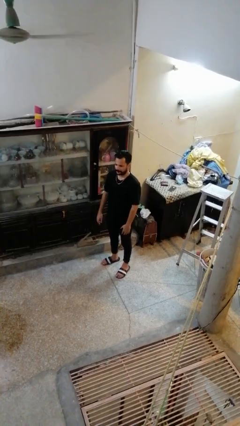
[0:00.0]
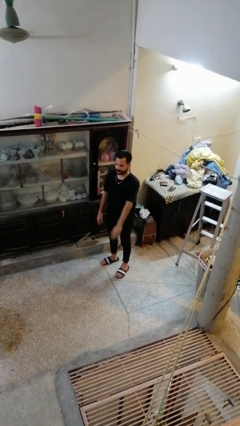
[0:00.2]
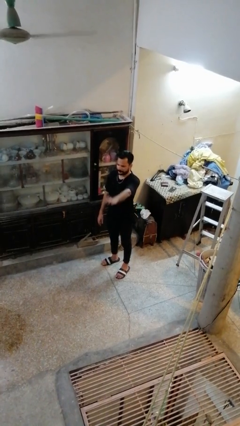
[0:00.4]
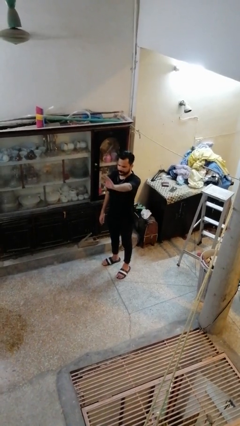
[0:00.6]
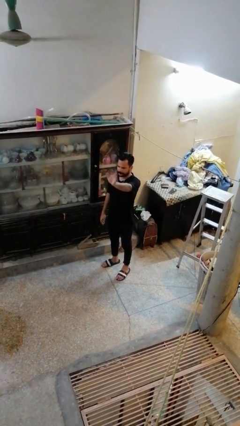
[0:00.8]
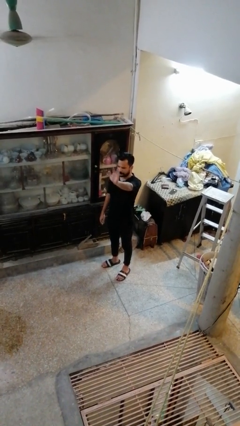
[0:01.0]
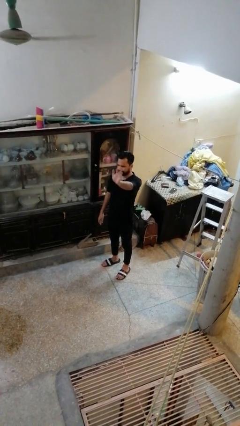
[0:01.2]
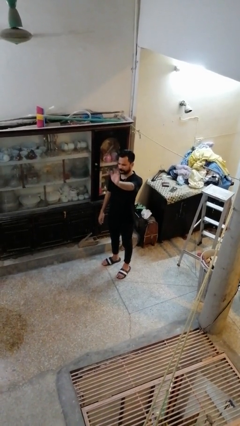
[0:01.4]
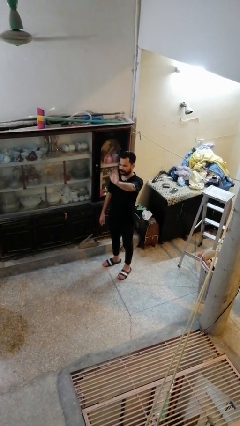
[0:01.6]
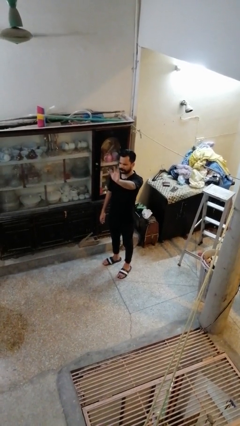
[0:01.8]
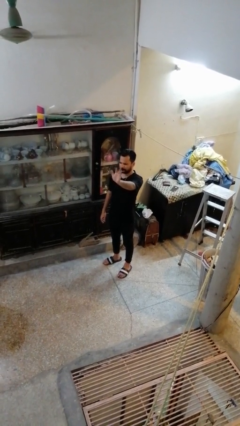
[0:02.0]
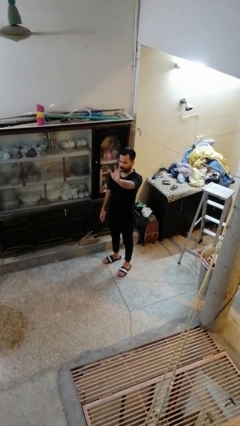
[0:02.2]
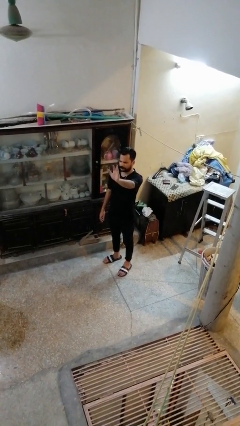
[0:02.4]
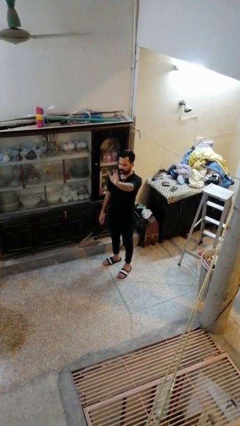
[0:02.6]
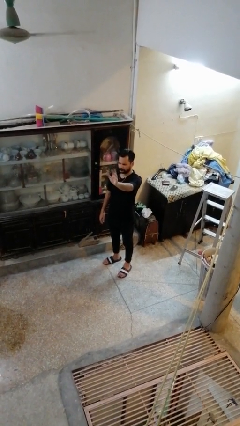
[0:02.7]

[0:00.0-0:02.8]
person waves at person

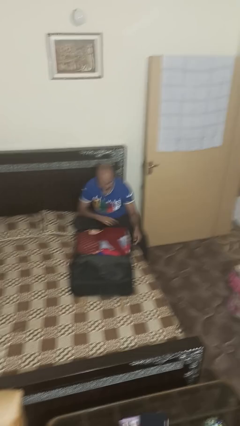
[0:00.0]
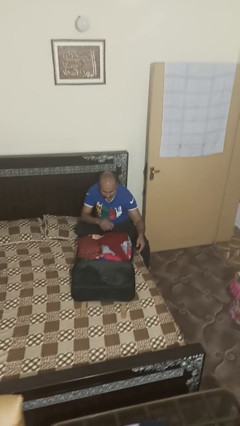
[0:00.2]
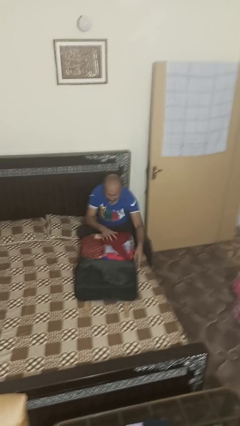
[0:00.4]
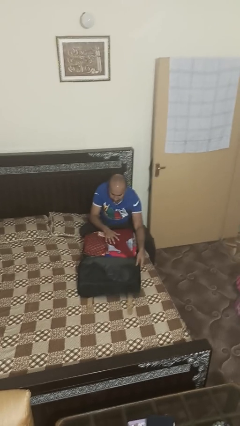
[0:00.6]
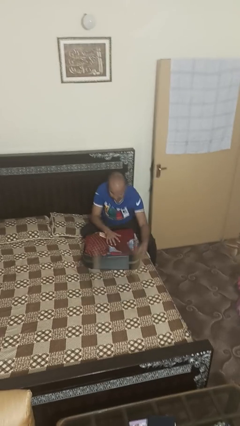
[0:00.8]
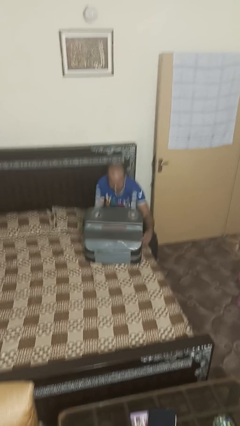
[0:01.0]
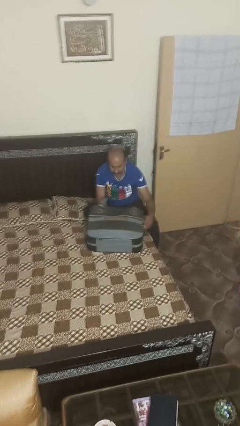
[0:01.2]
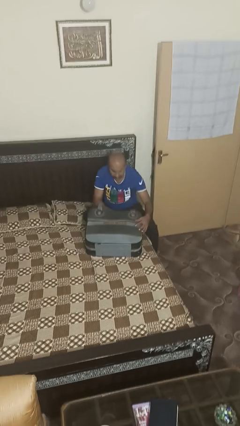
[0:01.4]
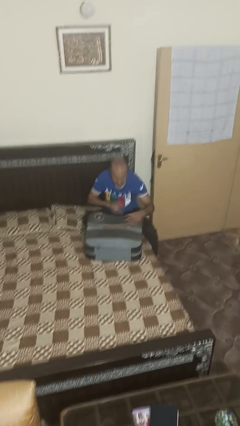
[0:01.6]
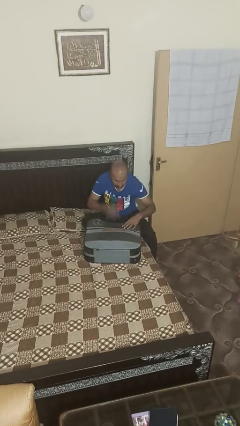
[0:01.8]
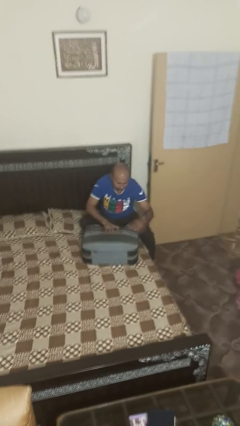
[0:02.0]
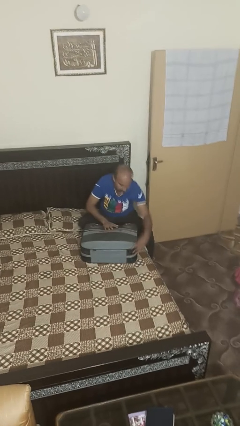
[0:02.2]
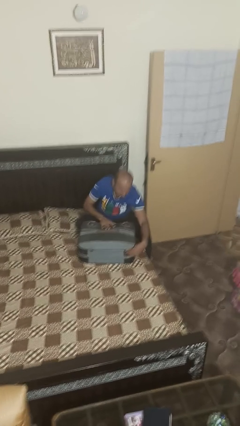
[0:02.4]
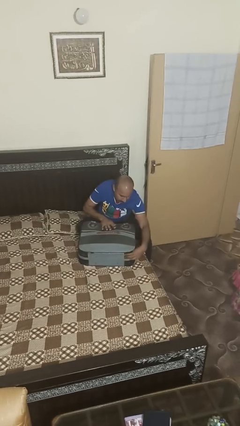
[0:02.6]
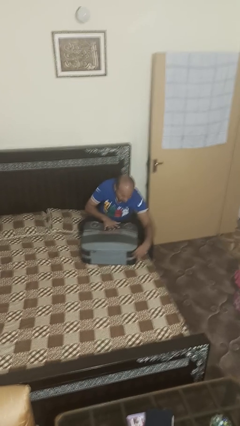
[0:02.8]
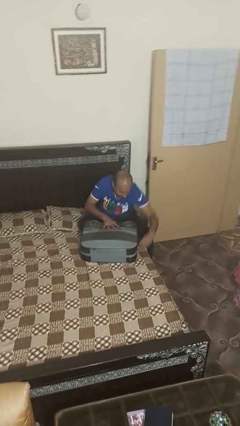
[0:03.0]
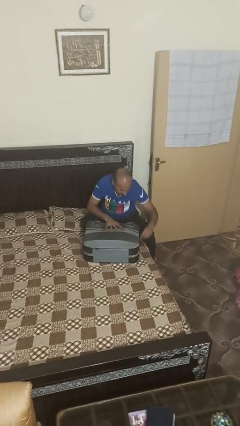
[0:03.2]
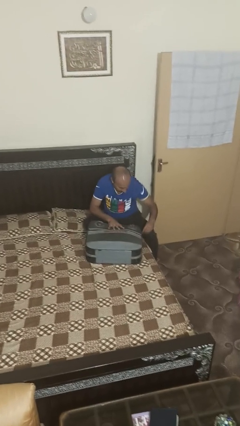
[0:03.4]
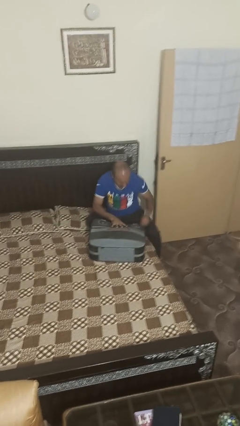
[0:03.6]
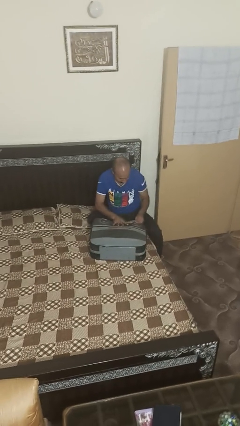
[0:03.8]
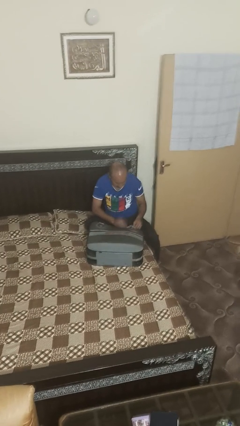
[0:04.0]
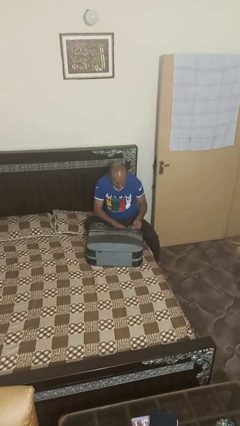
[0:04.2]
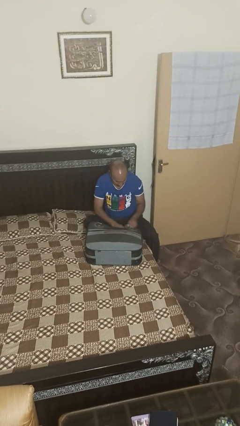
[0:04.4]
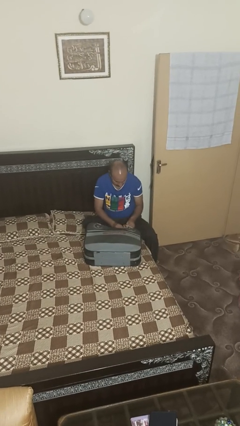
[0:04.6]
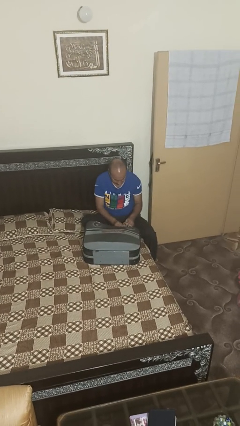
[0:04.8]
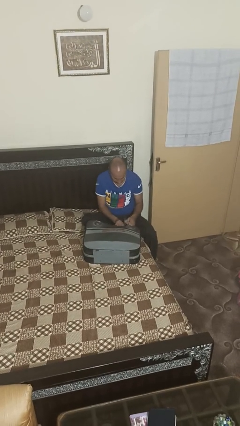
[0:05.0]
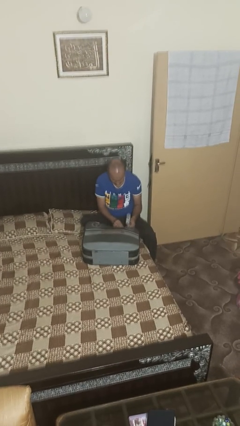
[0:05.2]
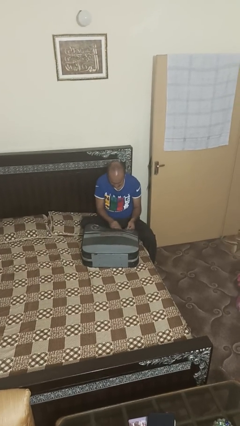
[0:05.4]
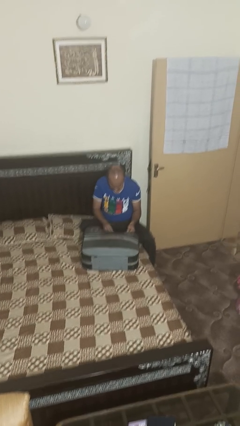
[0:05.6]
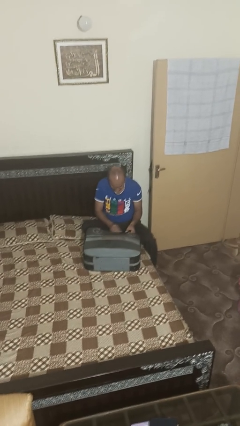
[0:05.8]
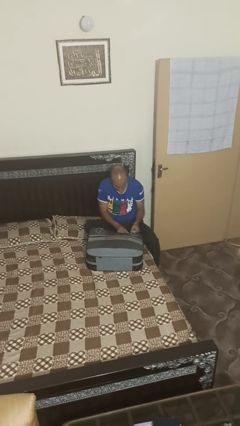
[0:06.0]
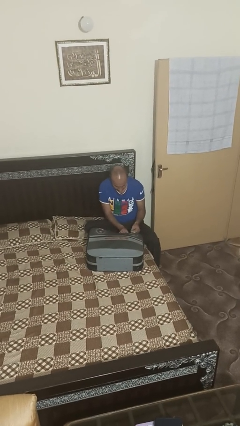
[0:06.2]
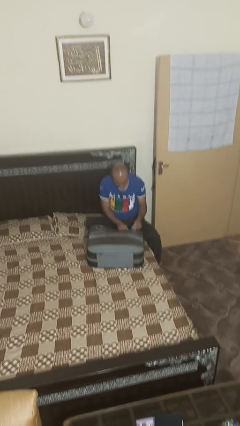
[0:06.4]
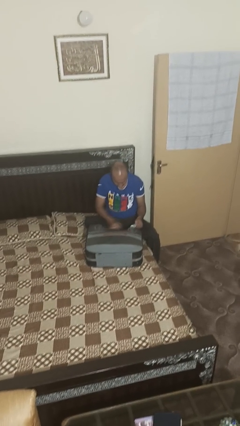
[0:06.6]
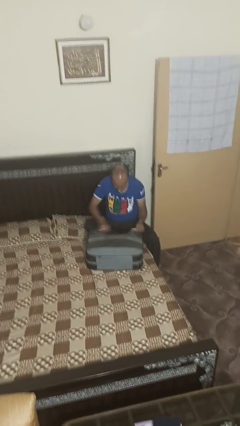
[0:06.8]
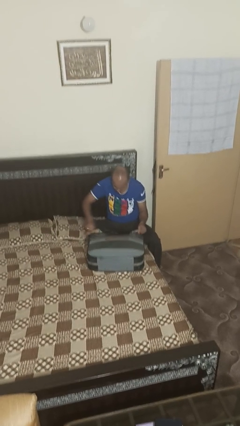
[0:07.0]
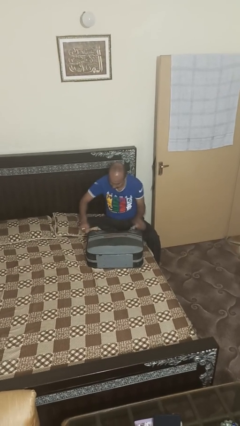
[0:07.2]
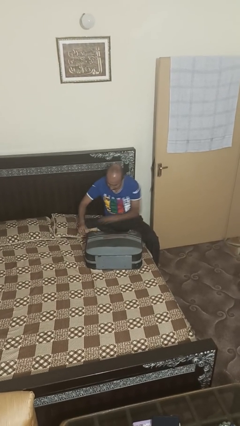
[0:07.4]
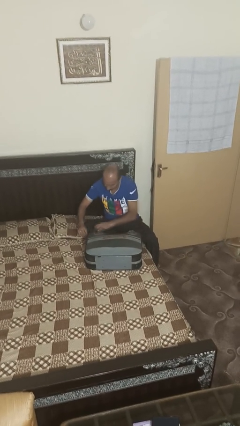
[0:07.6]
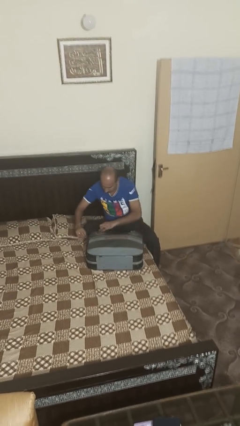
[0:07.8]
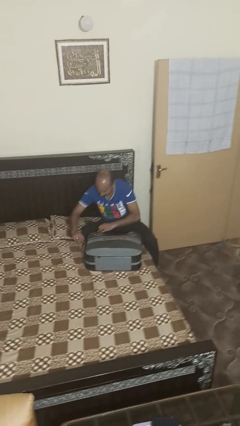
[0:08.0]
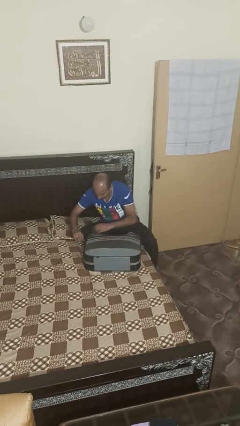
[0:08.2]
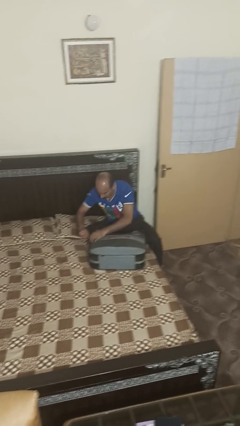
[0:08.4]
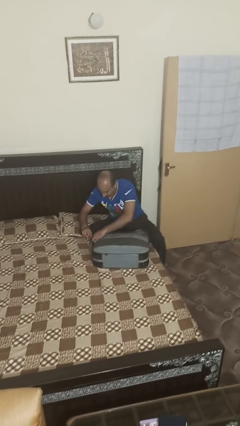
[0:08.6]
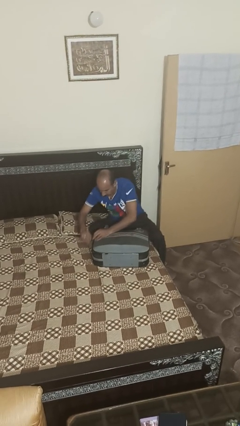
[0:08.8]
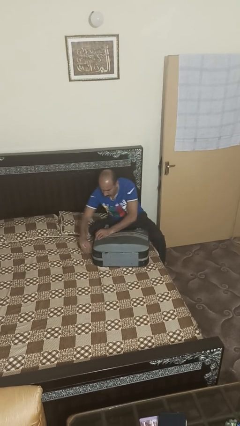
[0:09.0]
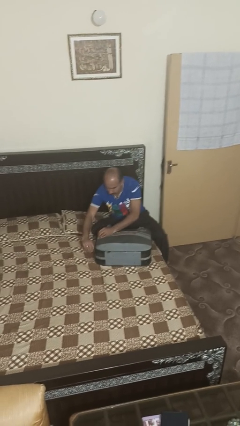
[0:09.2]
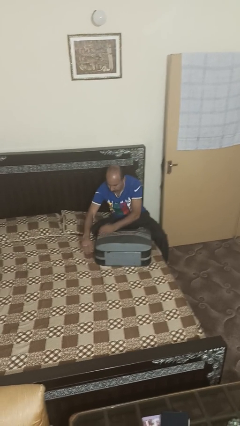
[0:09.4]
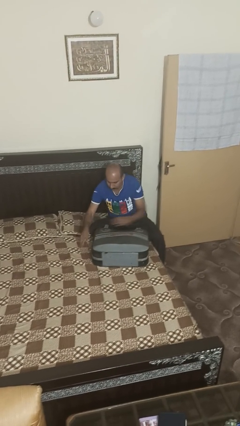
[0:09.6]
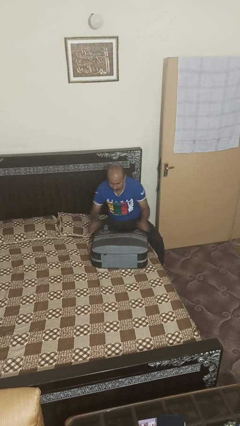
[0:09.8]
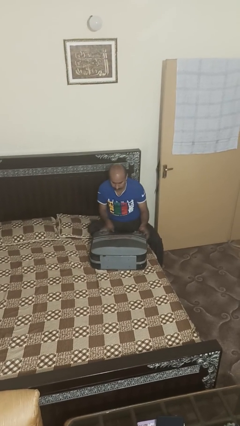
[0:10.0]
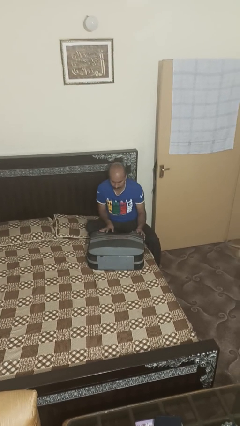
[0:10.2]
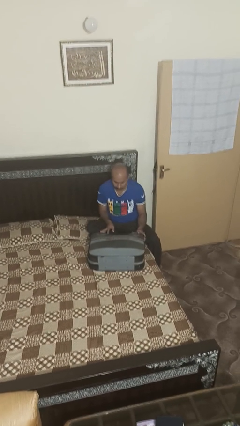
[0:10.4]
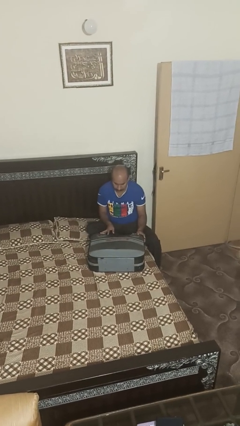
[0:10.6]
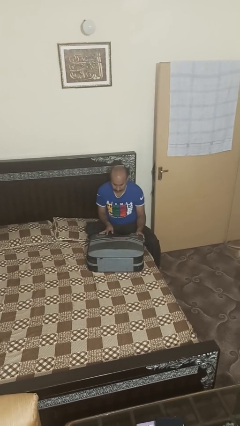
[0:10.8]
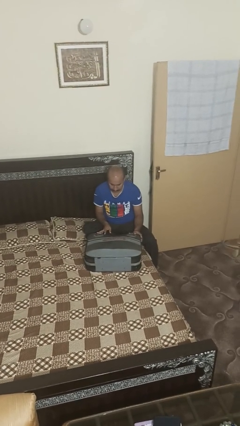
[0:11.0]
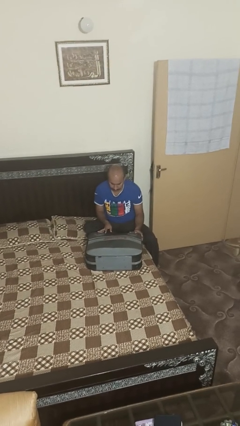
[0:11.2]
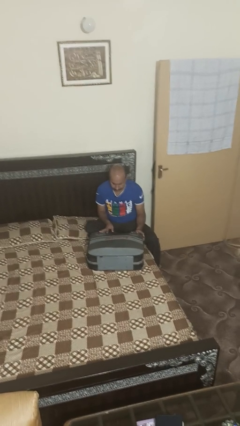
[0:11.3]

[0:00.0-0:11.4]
person closes suitcase

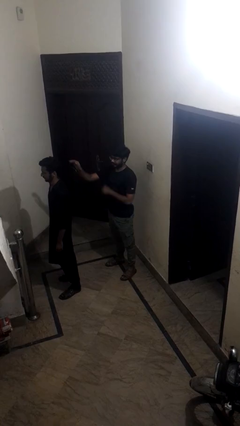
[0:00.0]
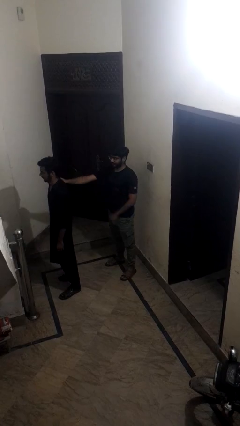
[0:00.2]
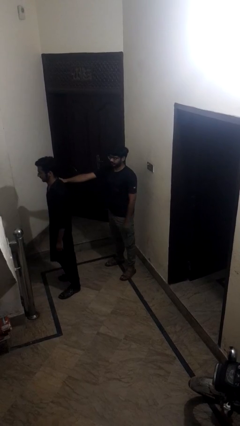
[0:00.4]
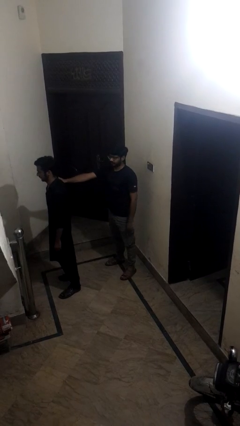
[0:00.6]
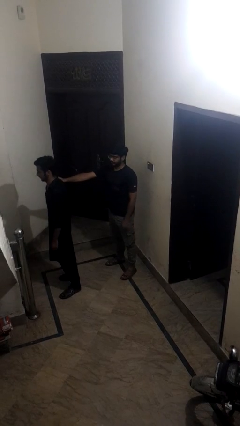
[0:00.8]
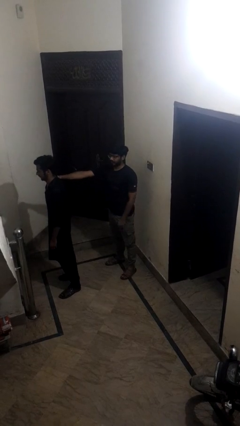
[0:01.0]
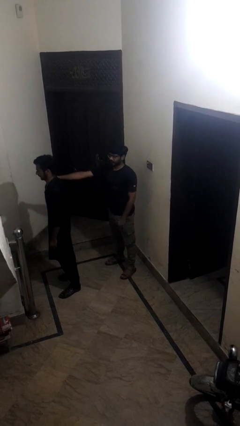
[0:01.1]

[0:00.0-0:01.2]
person grabs person by shoulder

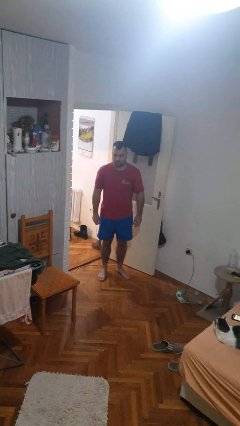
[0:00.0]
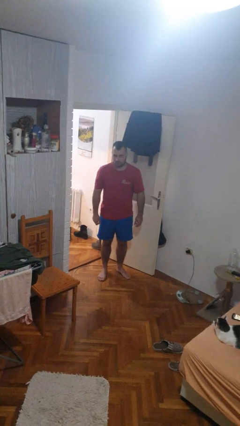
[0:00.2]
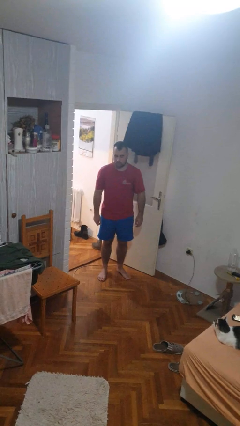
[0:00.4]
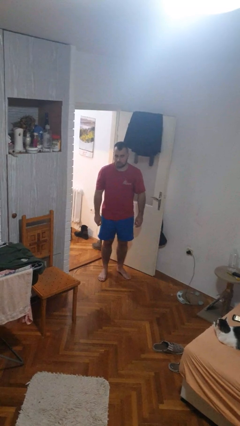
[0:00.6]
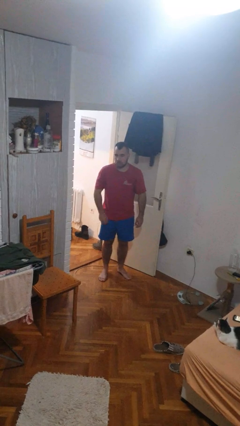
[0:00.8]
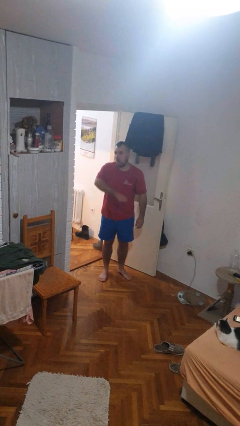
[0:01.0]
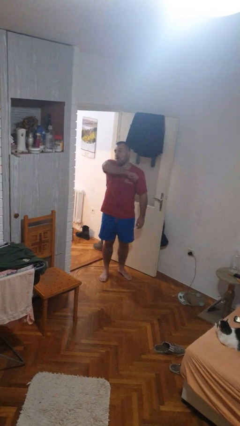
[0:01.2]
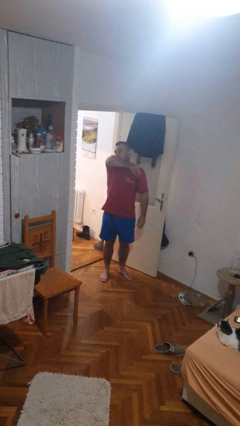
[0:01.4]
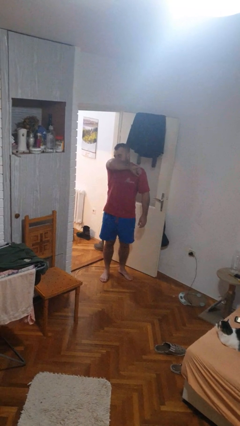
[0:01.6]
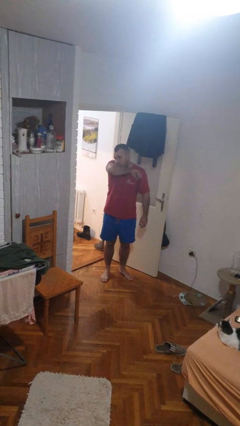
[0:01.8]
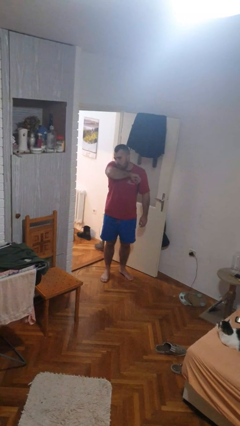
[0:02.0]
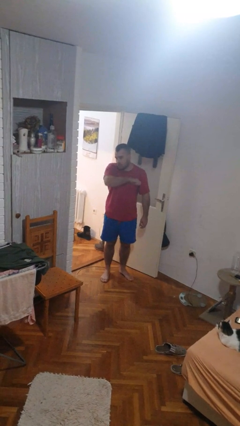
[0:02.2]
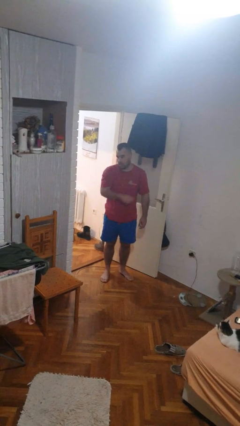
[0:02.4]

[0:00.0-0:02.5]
person sneezes into arm
